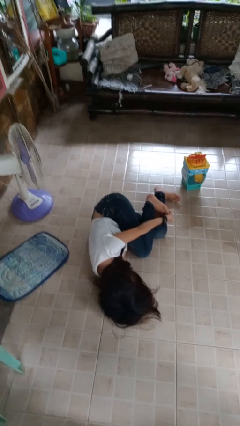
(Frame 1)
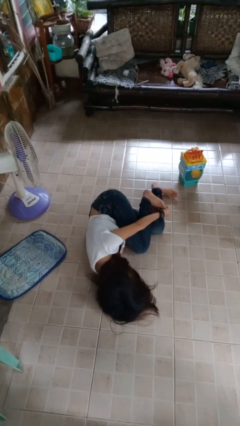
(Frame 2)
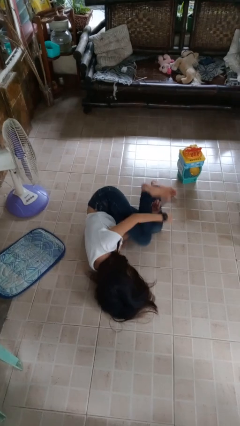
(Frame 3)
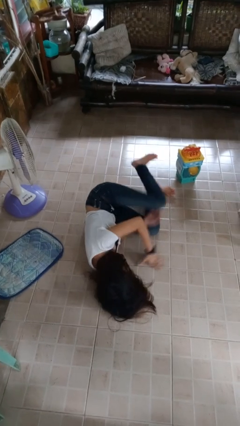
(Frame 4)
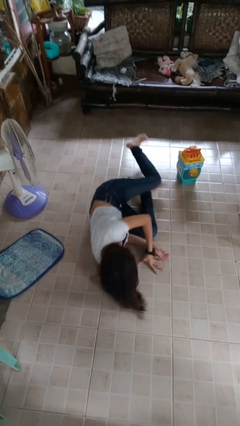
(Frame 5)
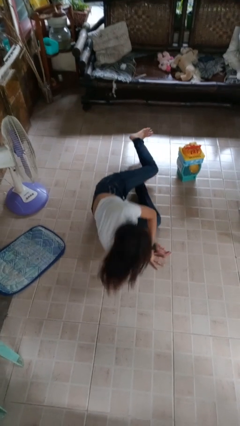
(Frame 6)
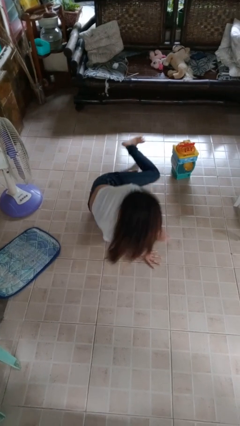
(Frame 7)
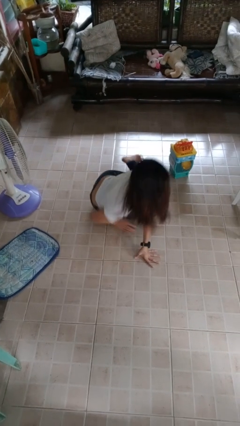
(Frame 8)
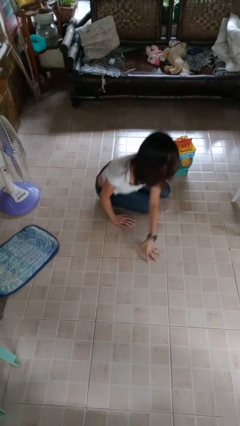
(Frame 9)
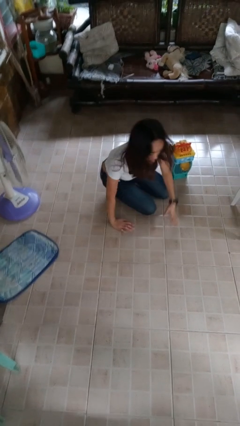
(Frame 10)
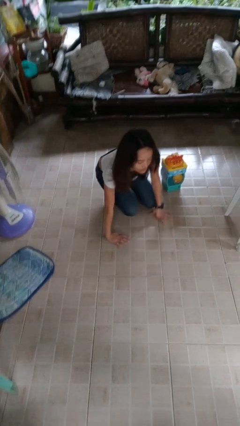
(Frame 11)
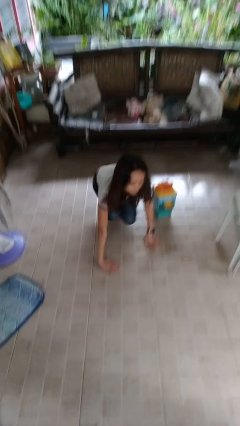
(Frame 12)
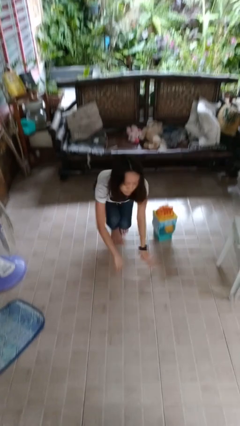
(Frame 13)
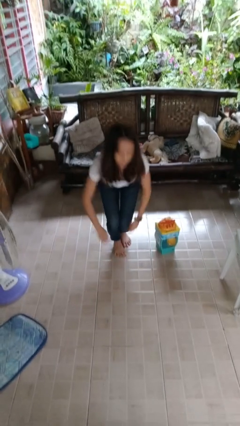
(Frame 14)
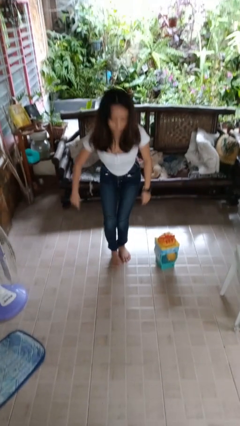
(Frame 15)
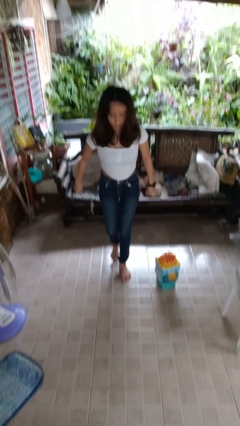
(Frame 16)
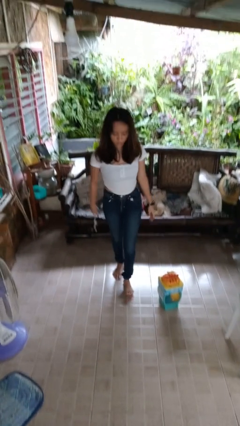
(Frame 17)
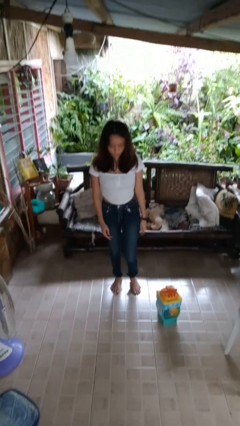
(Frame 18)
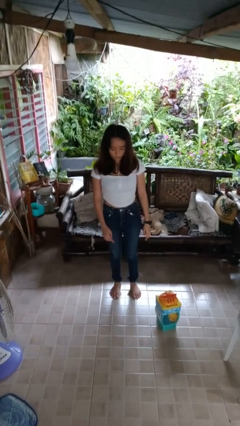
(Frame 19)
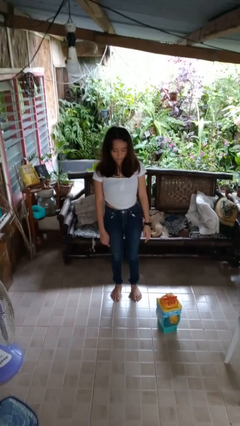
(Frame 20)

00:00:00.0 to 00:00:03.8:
person stands up from floor

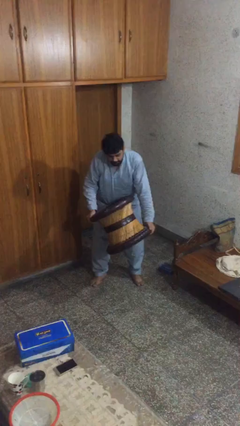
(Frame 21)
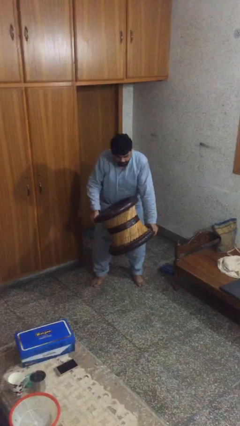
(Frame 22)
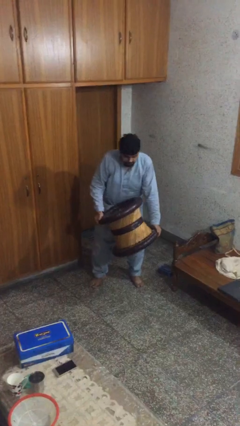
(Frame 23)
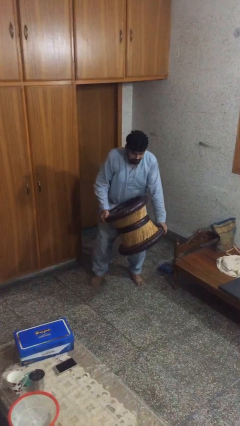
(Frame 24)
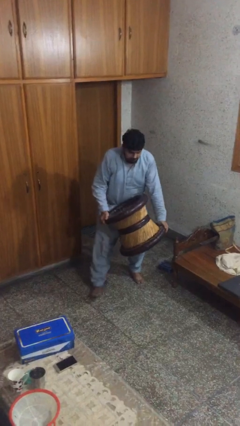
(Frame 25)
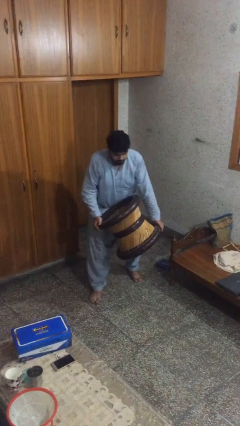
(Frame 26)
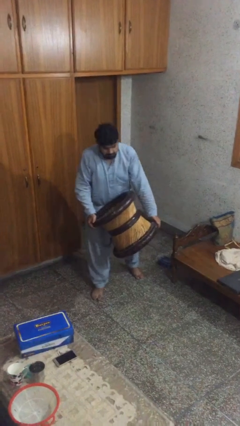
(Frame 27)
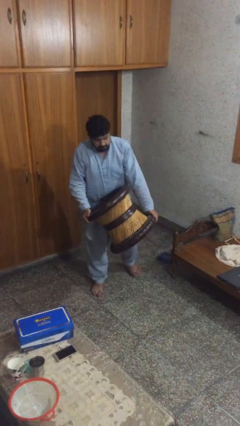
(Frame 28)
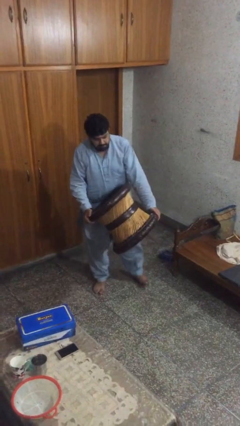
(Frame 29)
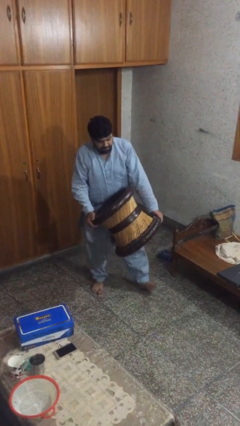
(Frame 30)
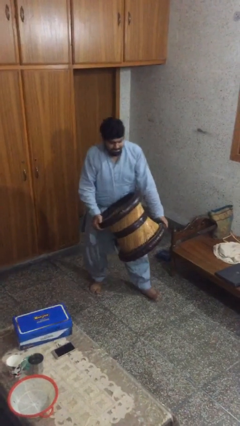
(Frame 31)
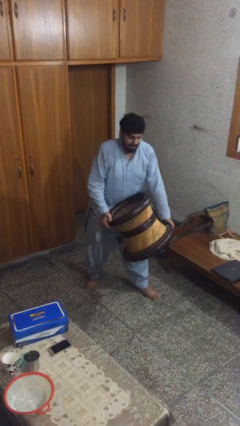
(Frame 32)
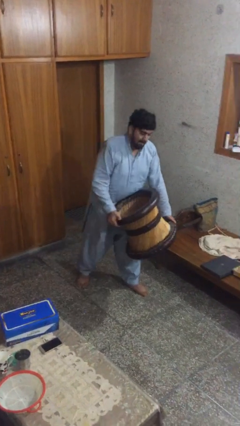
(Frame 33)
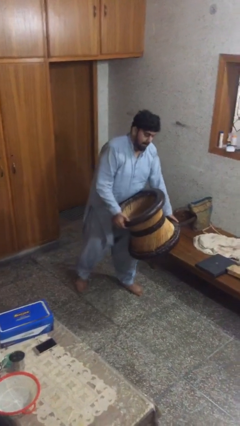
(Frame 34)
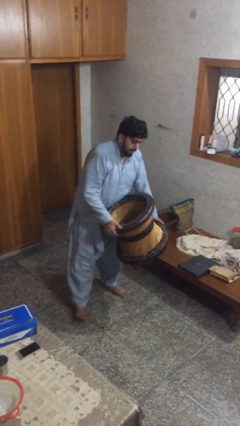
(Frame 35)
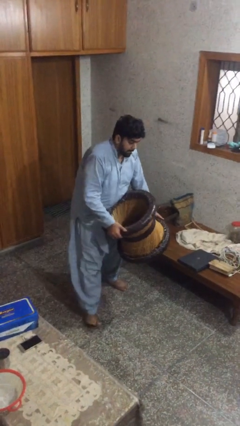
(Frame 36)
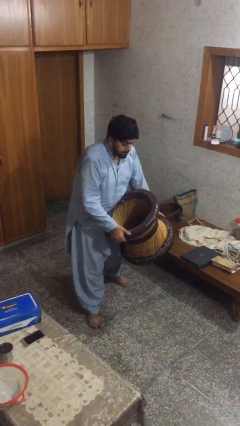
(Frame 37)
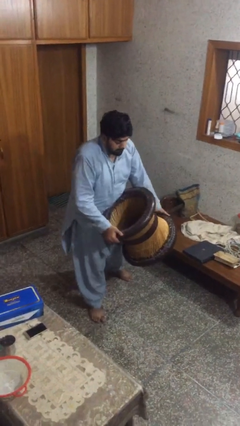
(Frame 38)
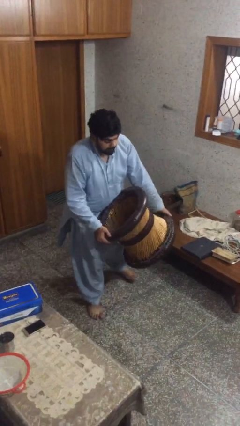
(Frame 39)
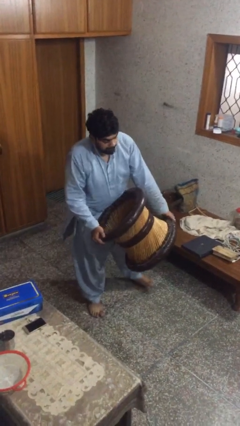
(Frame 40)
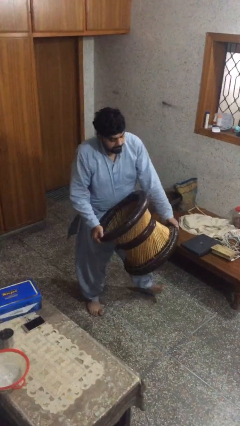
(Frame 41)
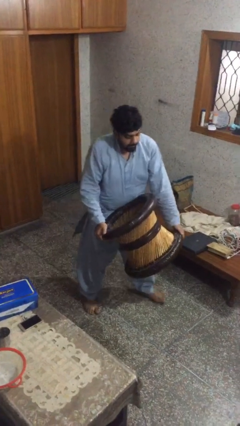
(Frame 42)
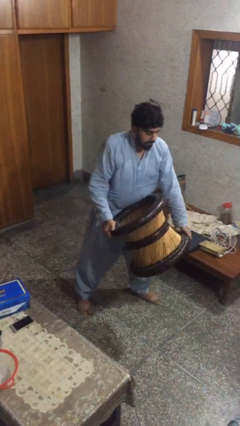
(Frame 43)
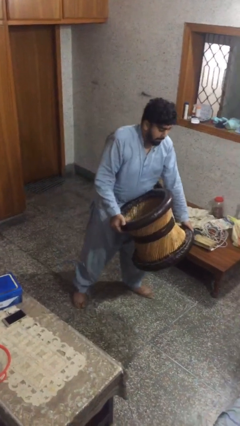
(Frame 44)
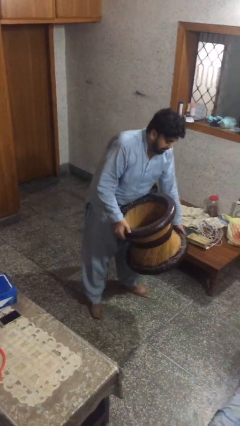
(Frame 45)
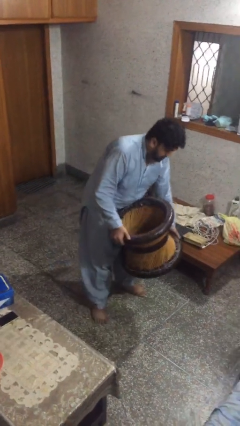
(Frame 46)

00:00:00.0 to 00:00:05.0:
person carries heavy object

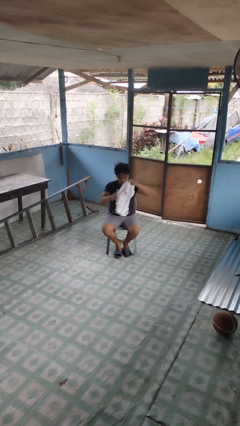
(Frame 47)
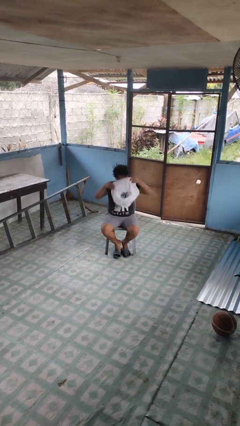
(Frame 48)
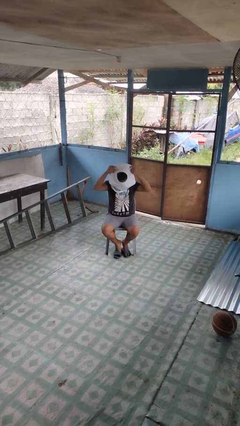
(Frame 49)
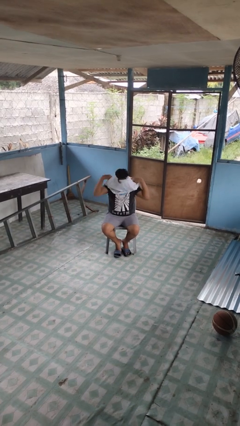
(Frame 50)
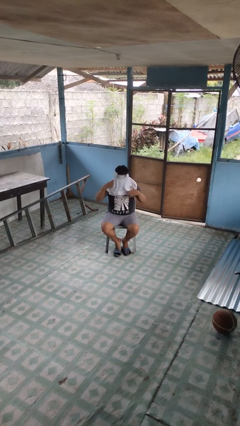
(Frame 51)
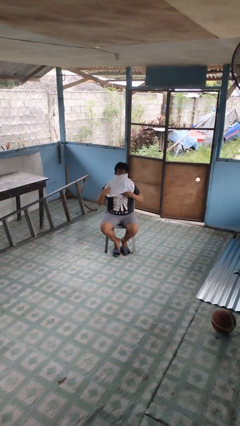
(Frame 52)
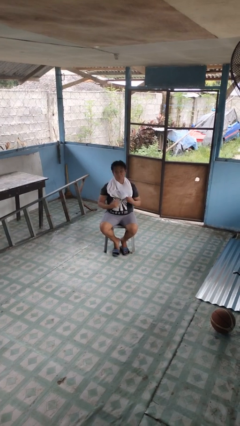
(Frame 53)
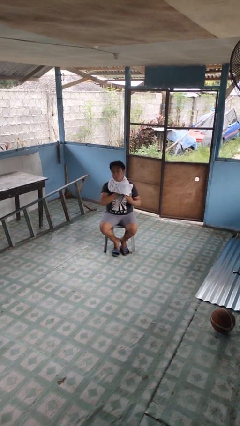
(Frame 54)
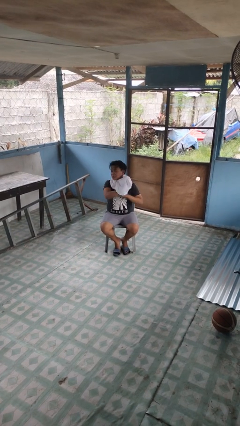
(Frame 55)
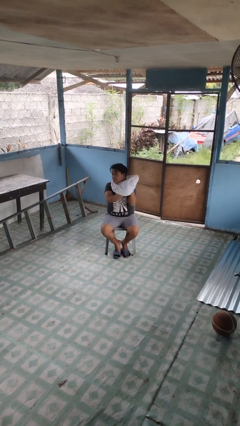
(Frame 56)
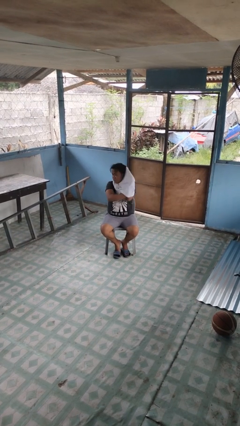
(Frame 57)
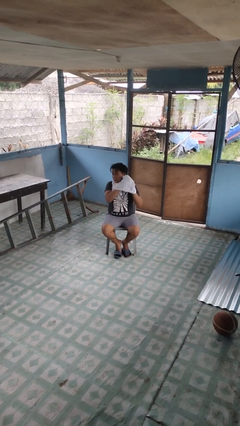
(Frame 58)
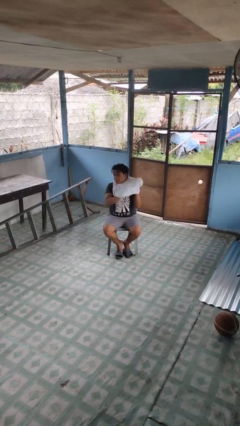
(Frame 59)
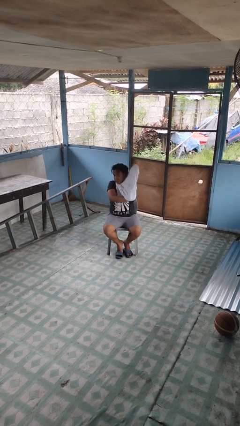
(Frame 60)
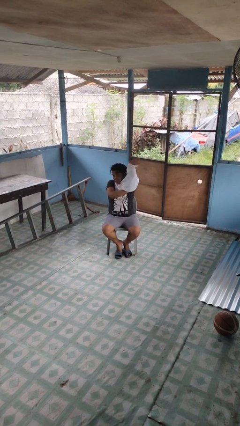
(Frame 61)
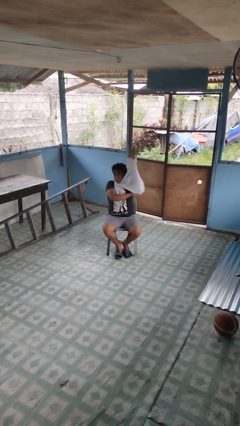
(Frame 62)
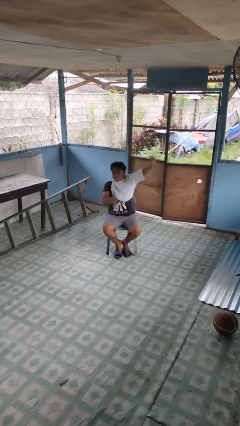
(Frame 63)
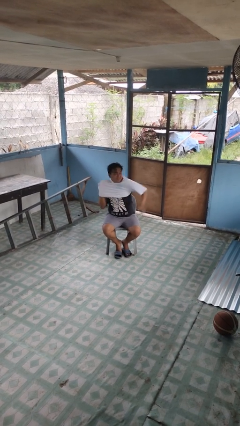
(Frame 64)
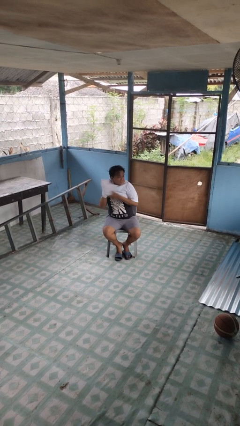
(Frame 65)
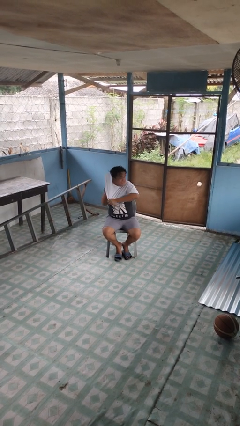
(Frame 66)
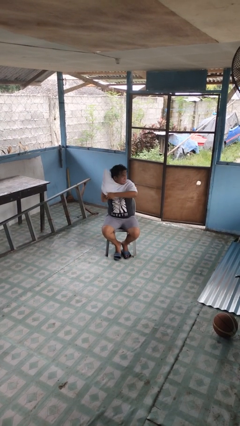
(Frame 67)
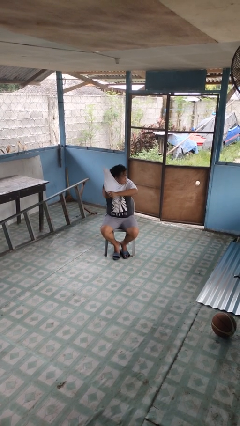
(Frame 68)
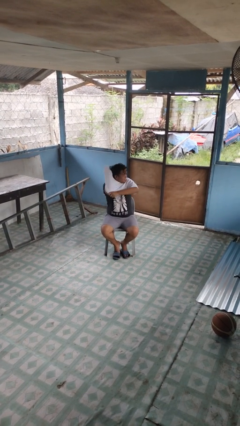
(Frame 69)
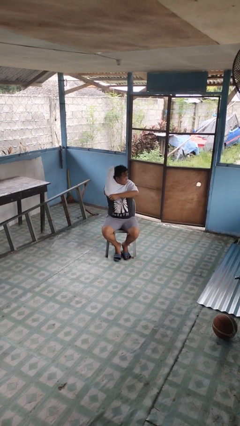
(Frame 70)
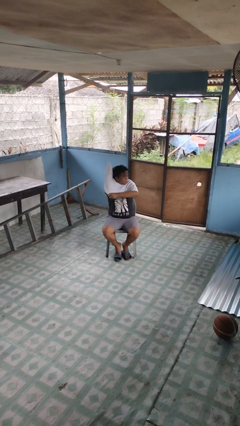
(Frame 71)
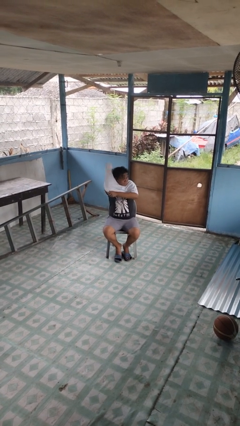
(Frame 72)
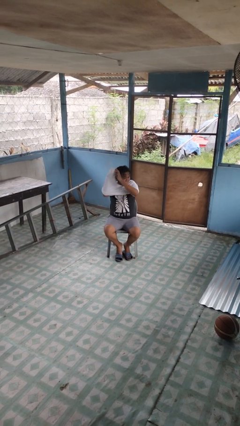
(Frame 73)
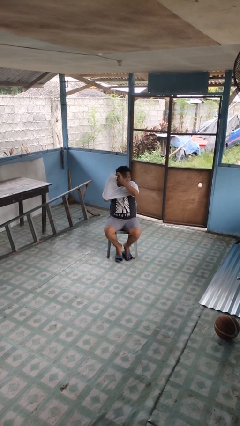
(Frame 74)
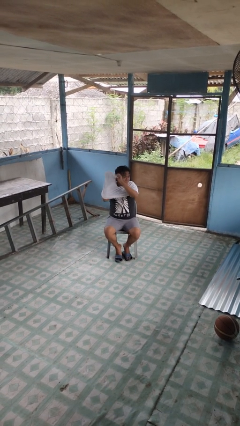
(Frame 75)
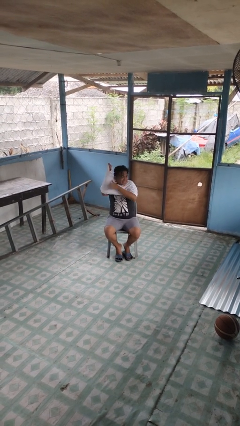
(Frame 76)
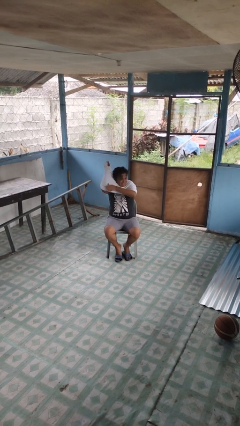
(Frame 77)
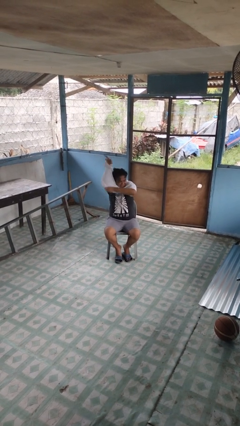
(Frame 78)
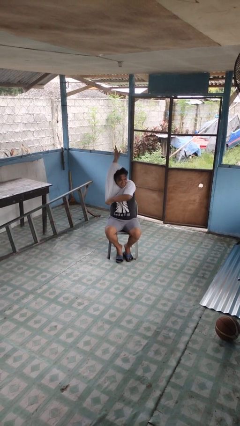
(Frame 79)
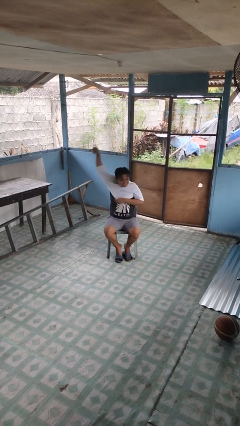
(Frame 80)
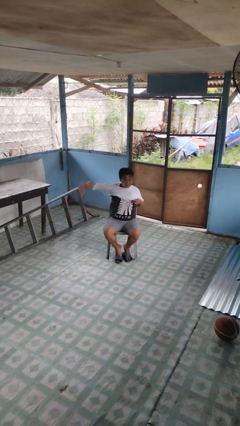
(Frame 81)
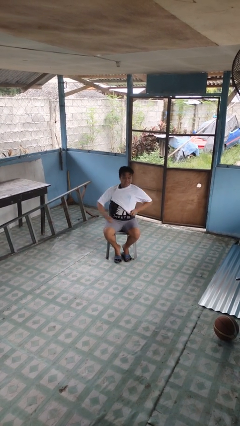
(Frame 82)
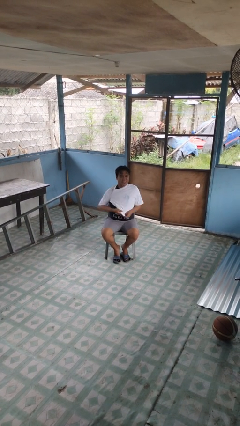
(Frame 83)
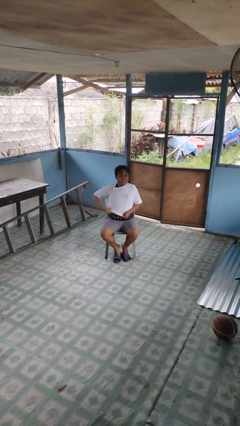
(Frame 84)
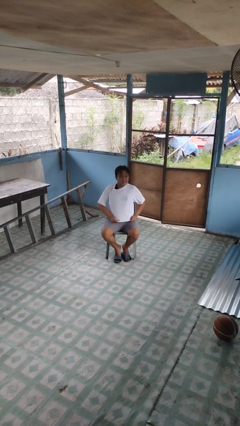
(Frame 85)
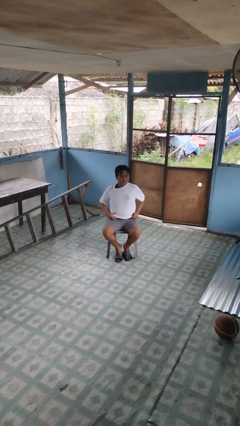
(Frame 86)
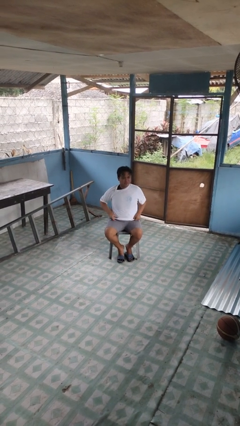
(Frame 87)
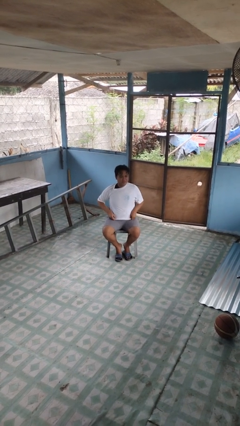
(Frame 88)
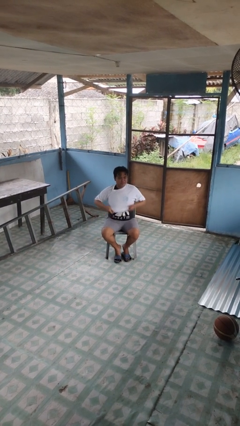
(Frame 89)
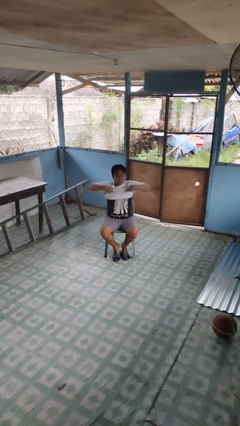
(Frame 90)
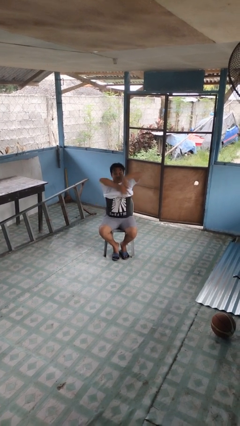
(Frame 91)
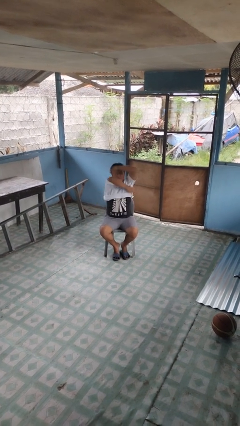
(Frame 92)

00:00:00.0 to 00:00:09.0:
person puts on shirt

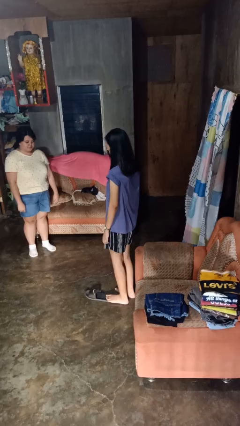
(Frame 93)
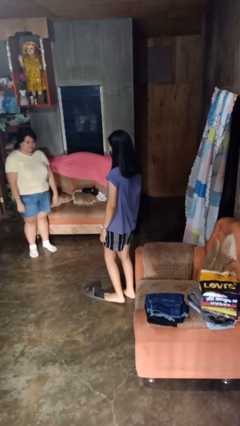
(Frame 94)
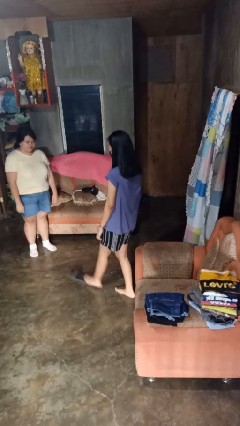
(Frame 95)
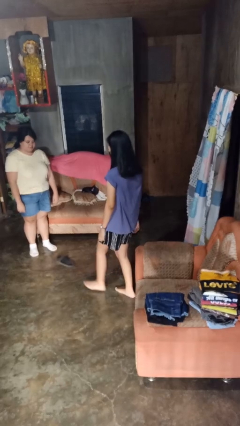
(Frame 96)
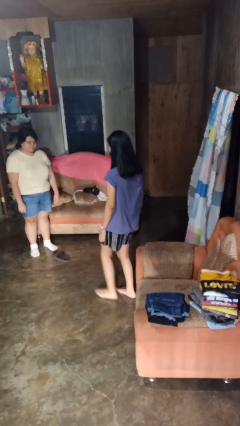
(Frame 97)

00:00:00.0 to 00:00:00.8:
person kicks object to person
